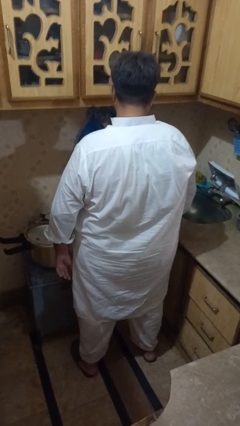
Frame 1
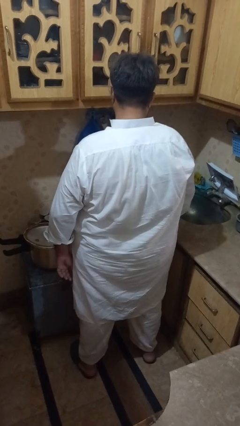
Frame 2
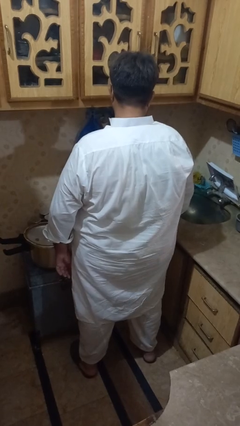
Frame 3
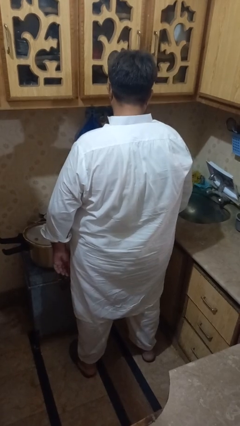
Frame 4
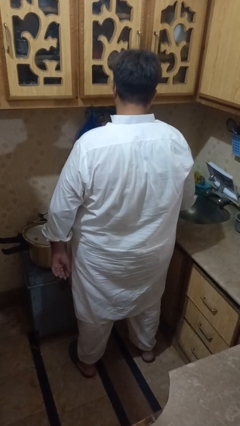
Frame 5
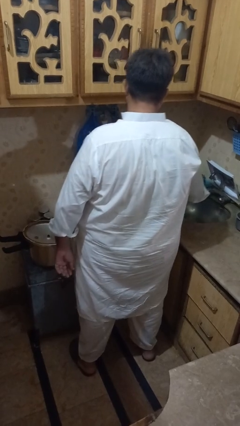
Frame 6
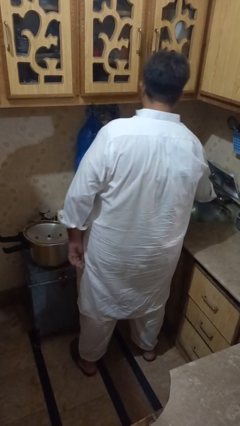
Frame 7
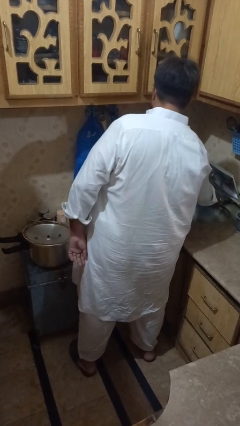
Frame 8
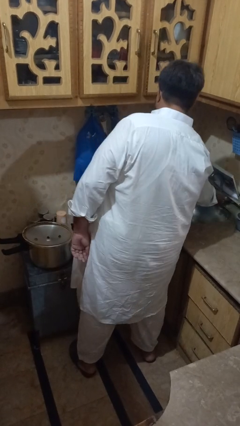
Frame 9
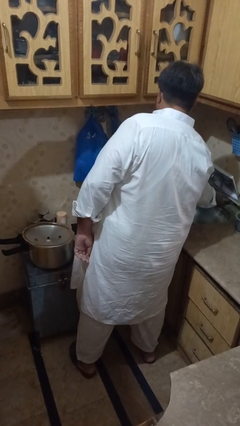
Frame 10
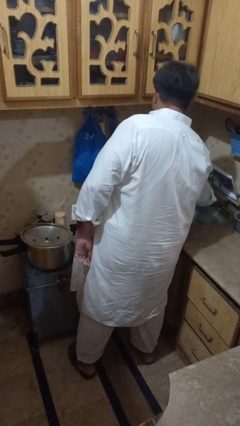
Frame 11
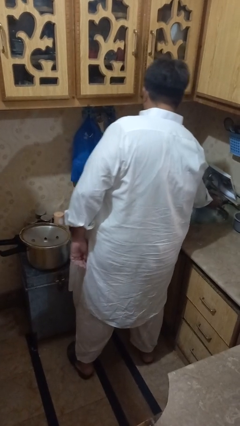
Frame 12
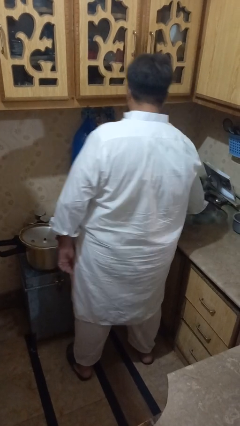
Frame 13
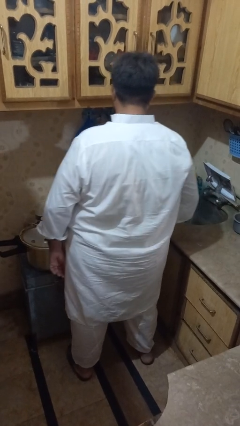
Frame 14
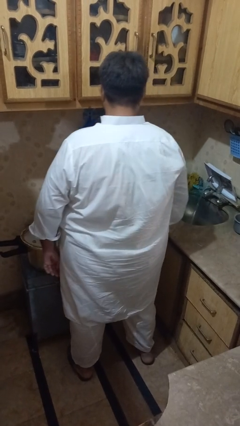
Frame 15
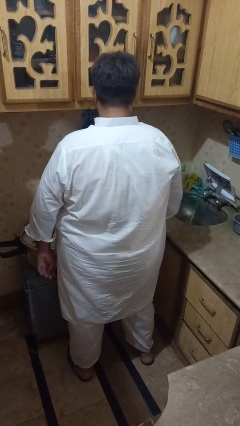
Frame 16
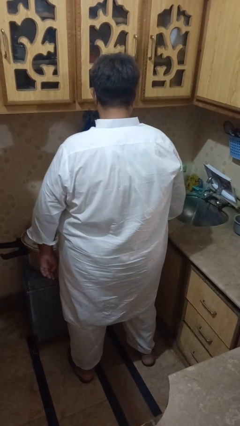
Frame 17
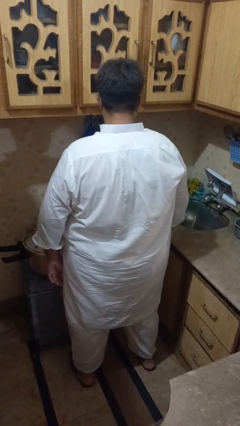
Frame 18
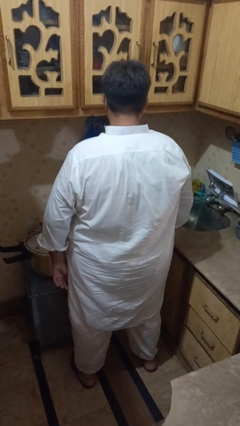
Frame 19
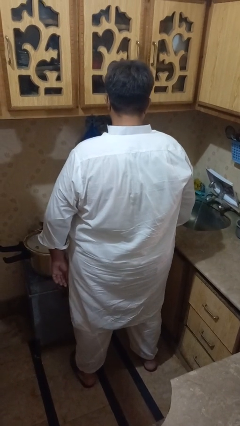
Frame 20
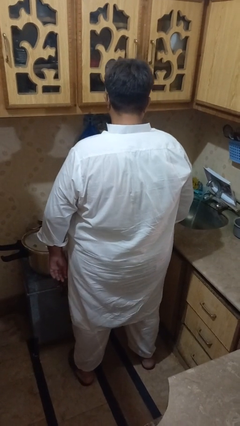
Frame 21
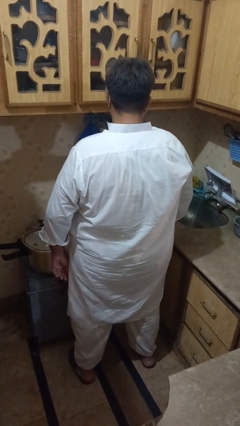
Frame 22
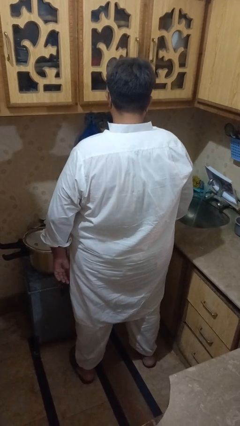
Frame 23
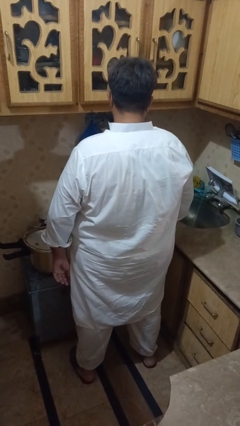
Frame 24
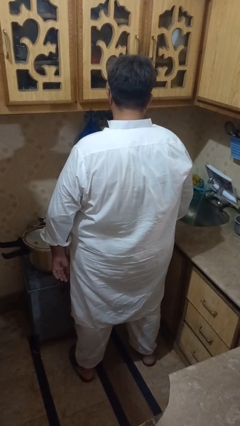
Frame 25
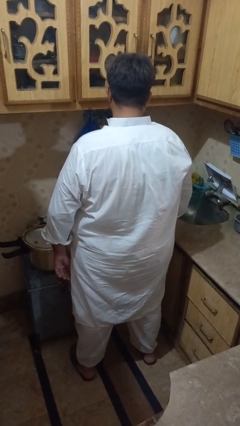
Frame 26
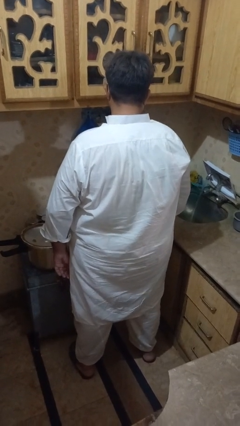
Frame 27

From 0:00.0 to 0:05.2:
person turns on faucet

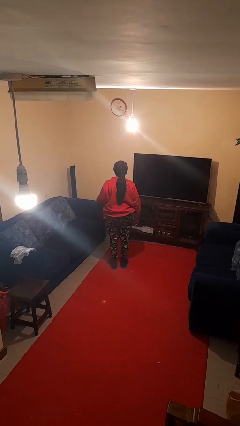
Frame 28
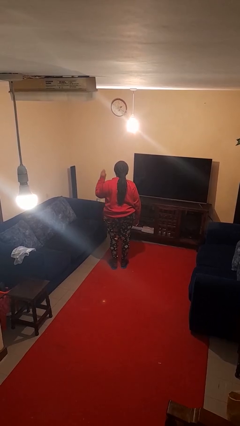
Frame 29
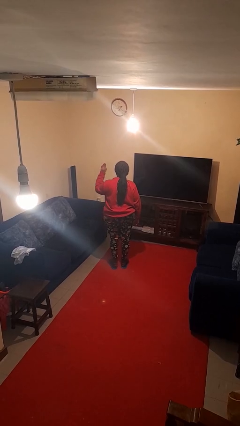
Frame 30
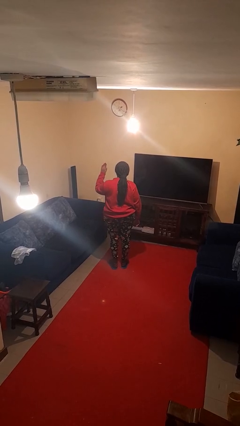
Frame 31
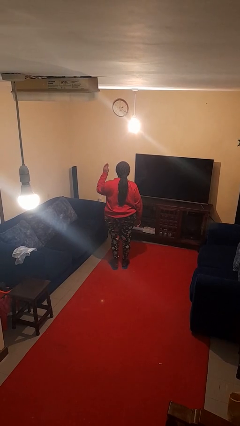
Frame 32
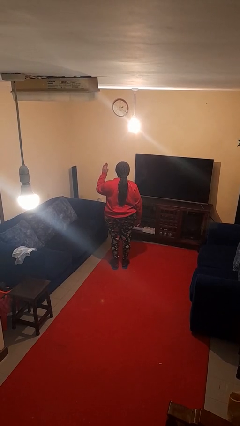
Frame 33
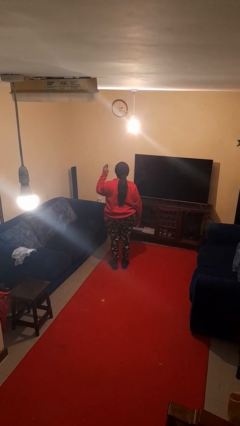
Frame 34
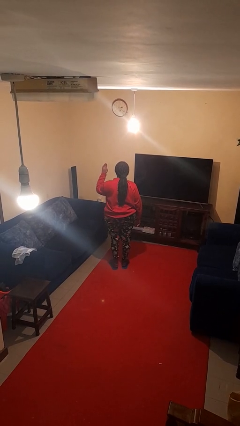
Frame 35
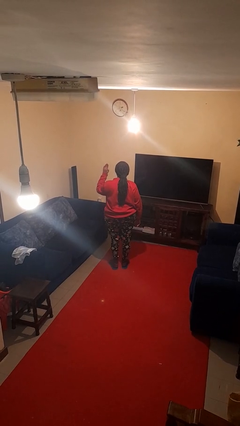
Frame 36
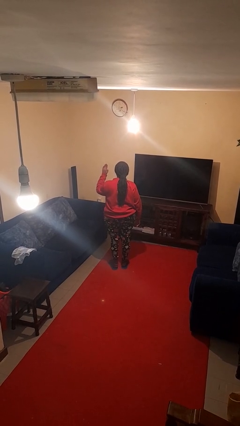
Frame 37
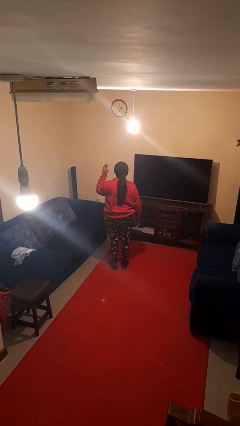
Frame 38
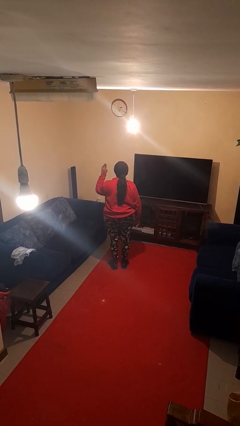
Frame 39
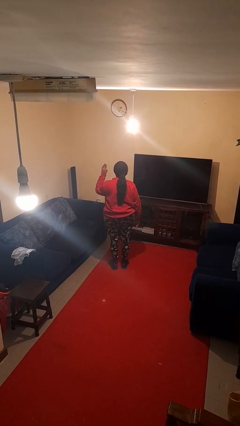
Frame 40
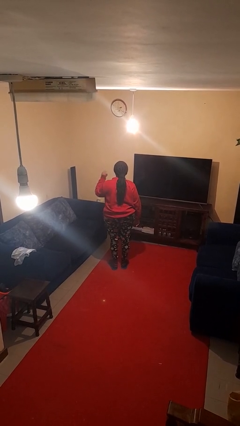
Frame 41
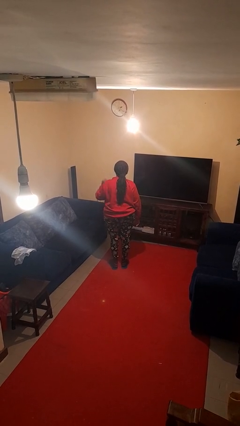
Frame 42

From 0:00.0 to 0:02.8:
person gestures stop

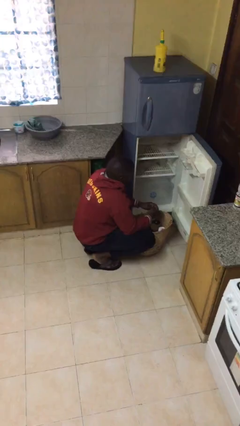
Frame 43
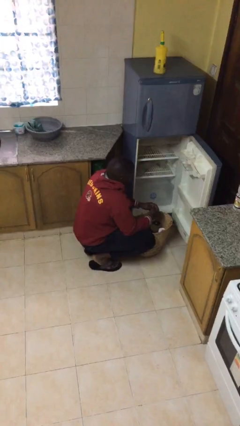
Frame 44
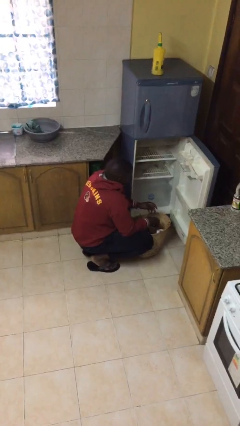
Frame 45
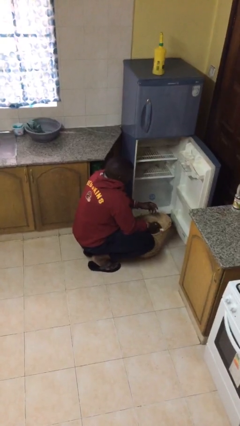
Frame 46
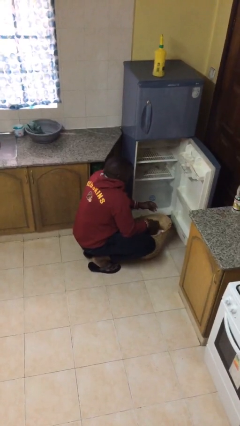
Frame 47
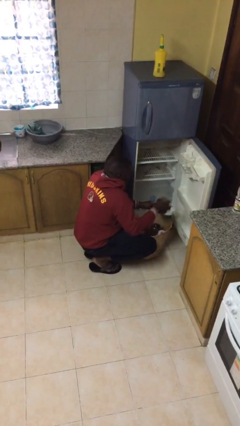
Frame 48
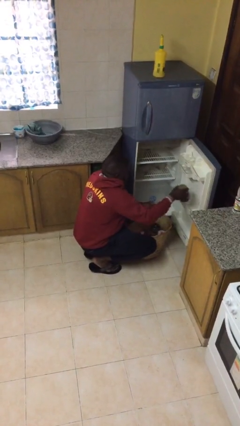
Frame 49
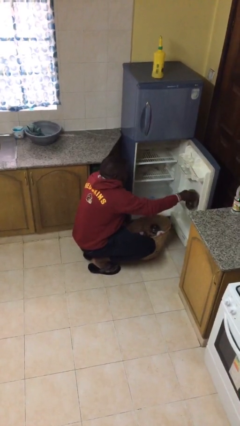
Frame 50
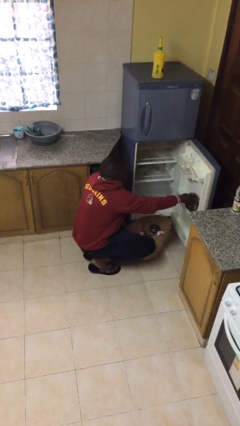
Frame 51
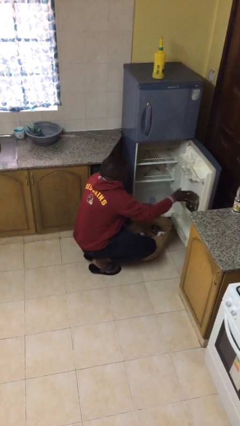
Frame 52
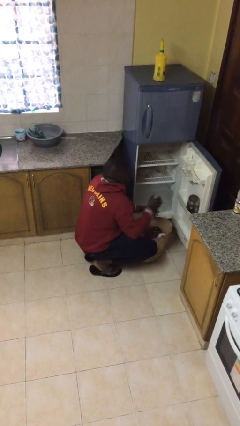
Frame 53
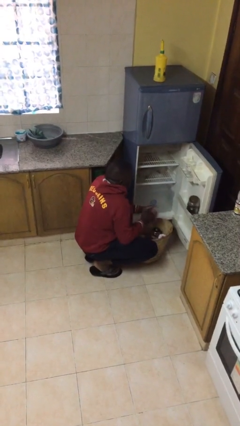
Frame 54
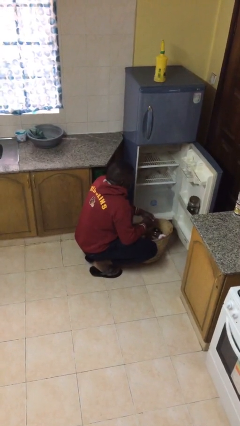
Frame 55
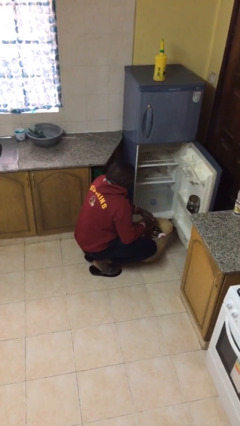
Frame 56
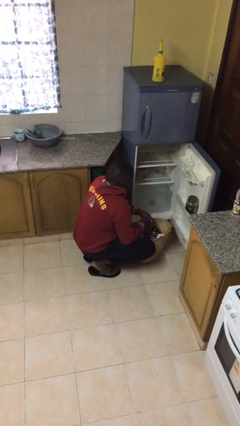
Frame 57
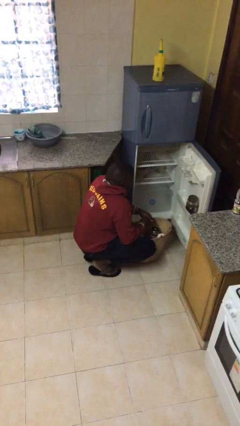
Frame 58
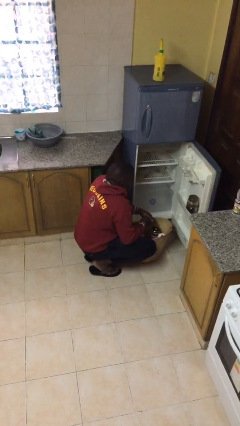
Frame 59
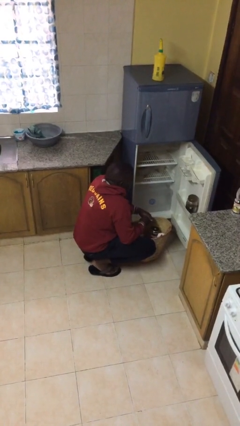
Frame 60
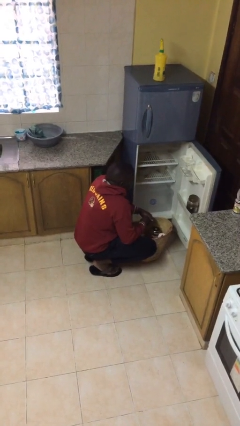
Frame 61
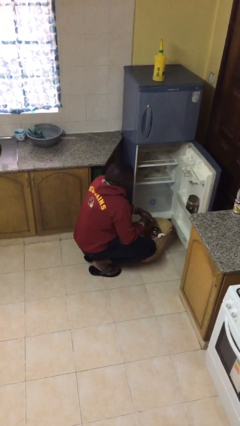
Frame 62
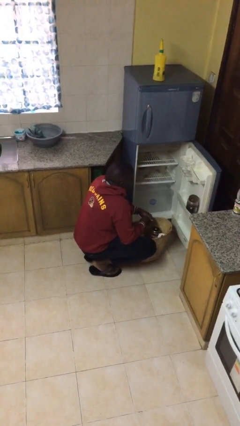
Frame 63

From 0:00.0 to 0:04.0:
person loads groceries into refrigerator

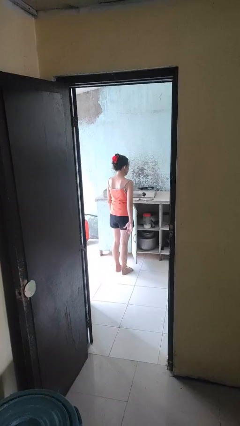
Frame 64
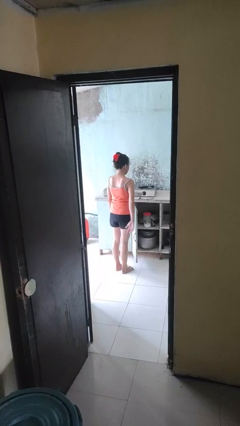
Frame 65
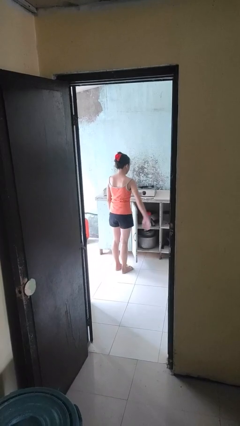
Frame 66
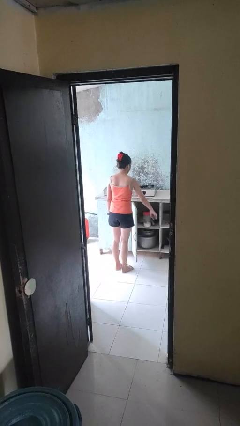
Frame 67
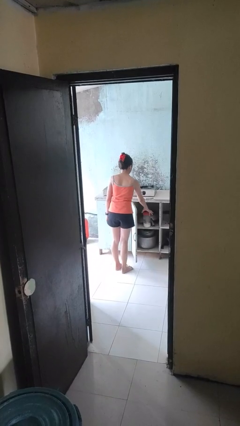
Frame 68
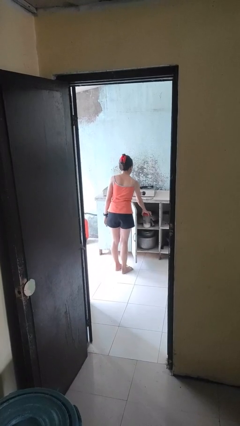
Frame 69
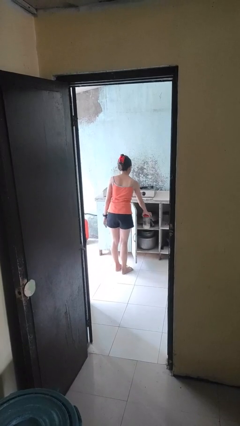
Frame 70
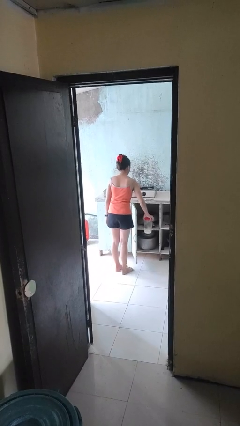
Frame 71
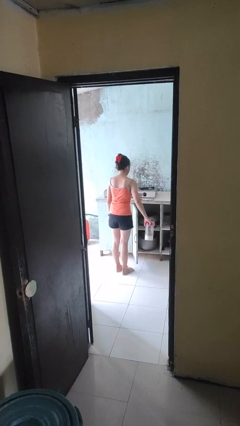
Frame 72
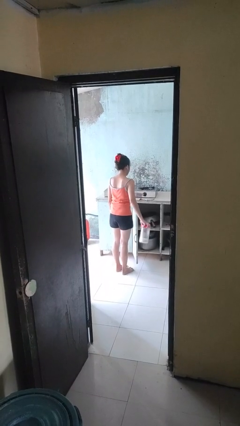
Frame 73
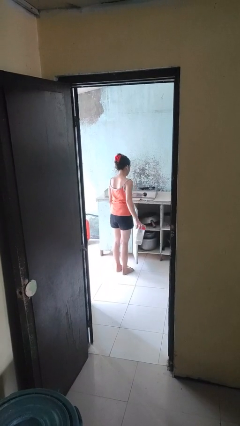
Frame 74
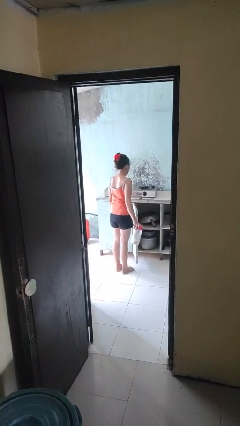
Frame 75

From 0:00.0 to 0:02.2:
person picks up object from cabinet

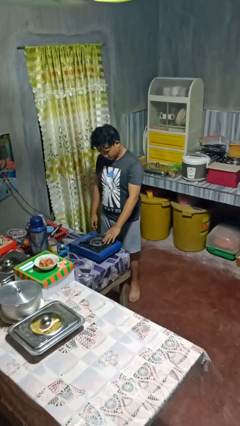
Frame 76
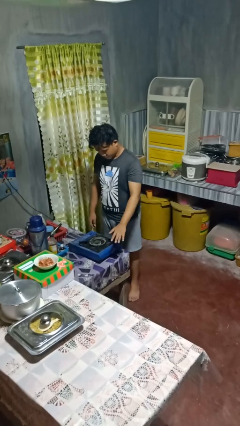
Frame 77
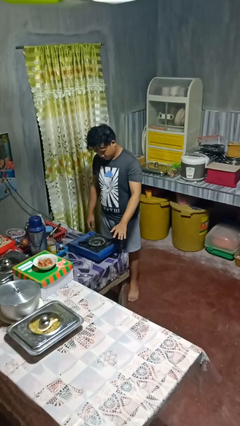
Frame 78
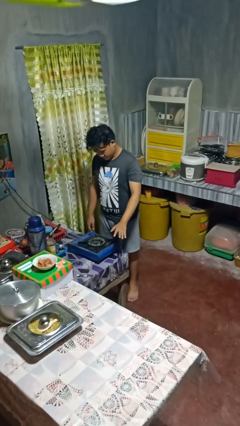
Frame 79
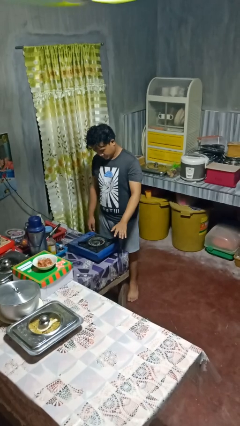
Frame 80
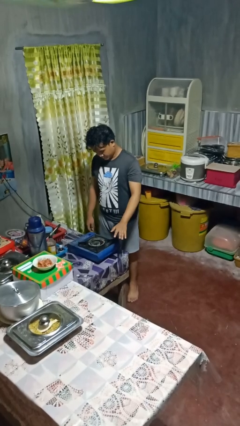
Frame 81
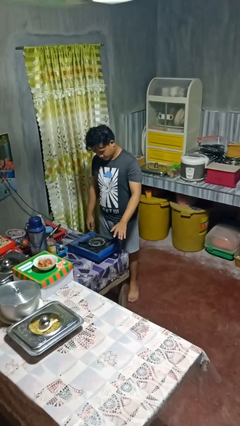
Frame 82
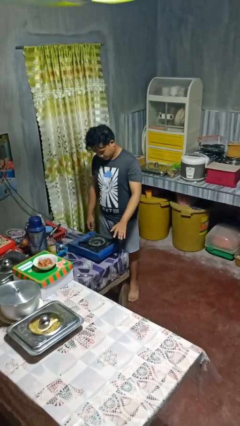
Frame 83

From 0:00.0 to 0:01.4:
person burns hand

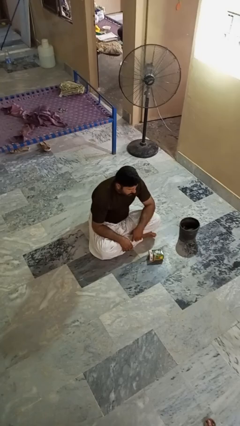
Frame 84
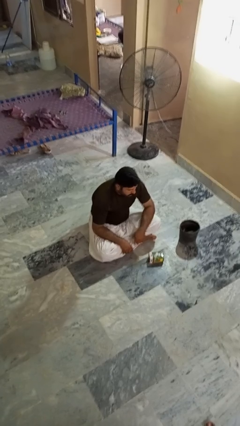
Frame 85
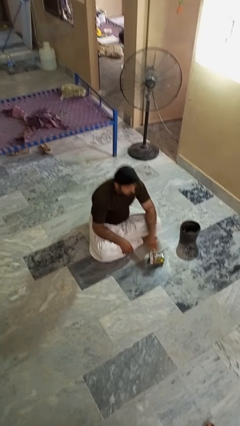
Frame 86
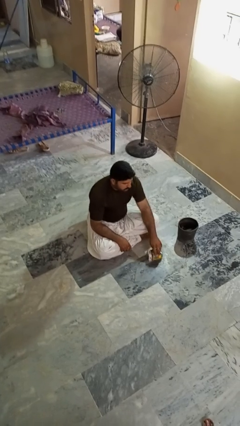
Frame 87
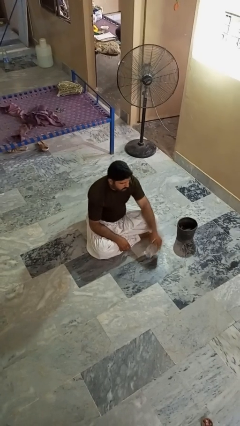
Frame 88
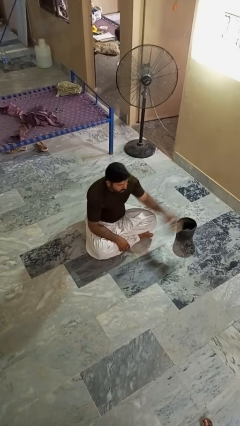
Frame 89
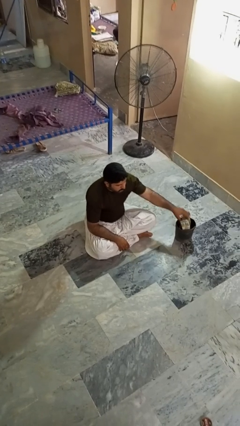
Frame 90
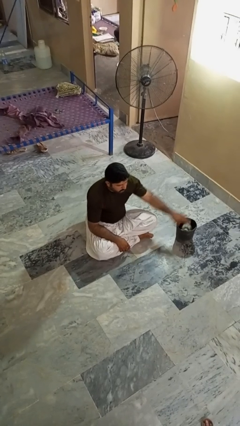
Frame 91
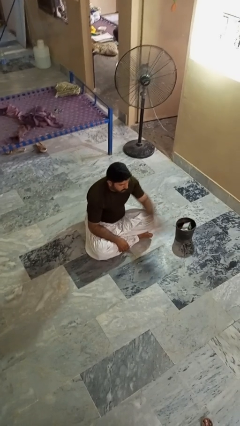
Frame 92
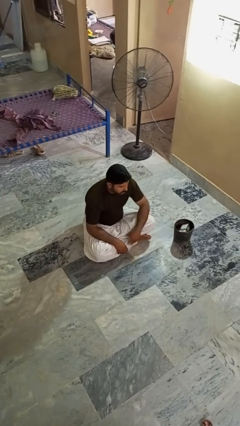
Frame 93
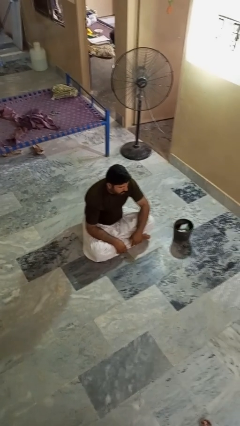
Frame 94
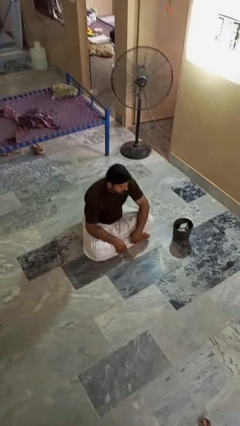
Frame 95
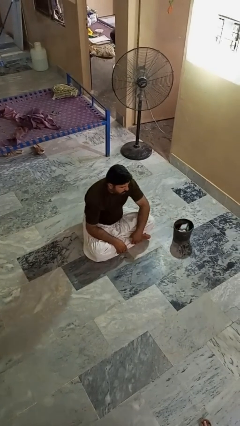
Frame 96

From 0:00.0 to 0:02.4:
person puts object into basket
